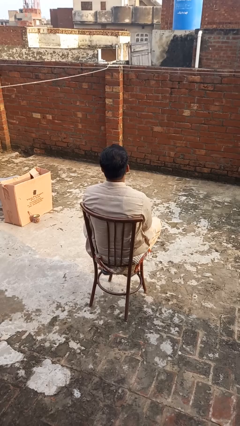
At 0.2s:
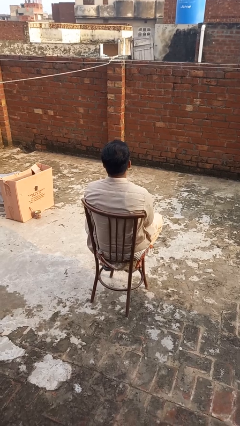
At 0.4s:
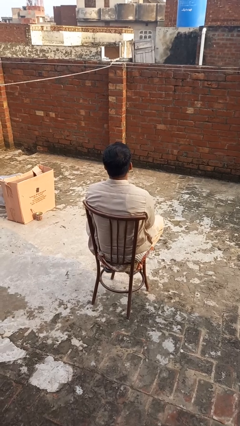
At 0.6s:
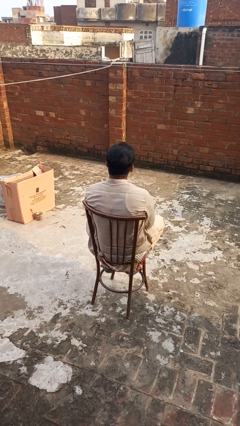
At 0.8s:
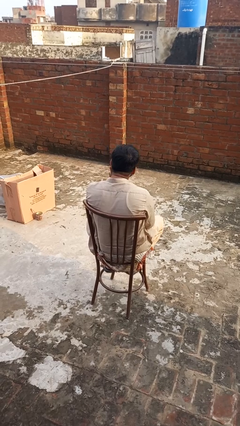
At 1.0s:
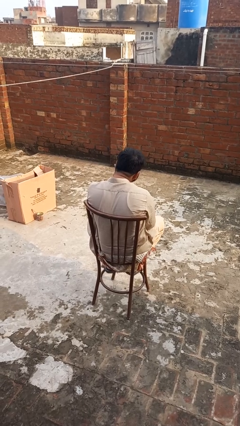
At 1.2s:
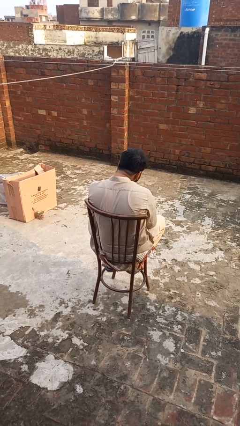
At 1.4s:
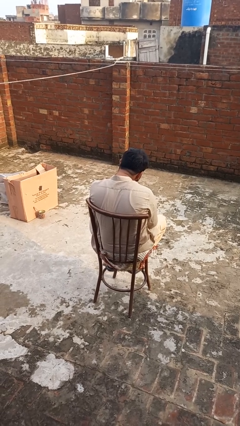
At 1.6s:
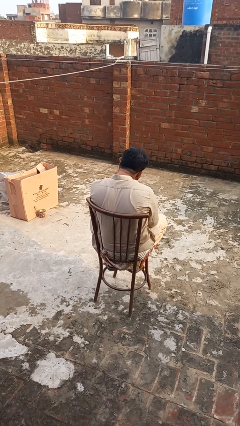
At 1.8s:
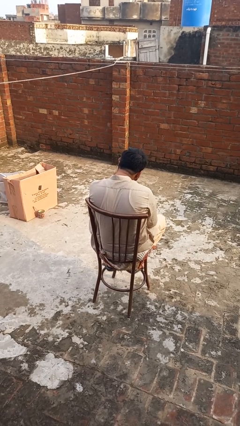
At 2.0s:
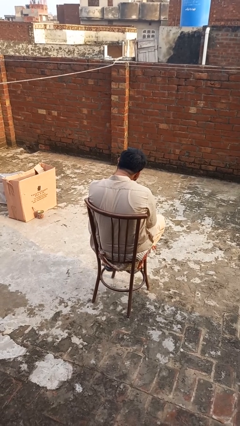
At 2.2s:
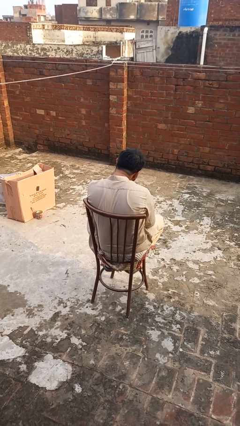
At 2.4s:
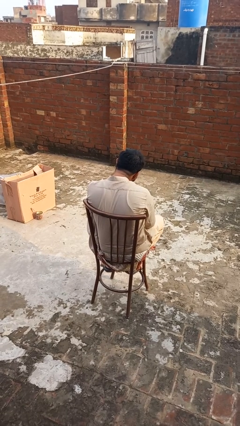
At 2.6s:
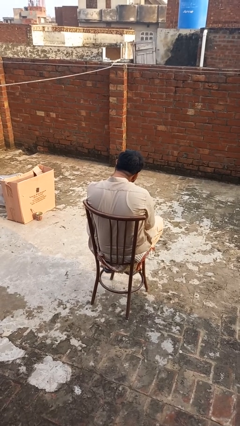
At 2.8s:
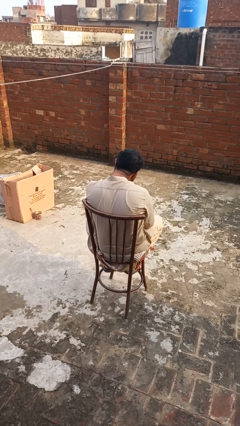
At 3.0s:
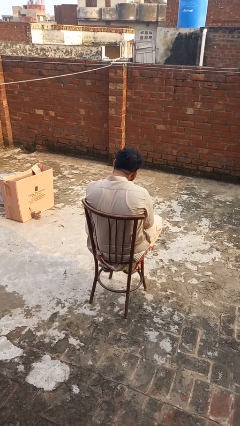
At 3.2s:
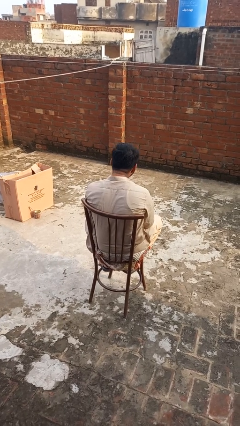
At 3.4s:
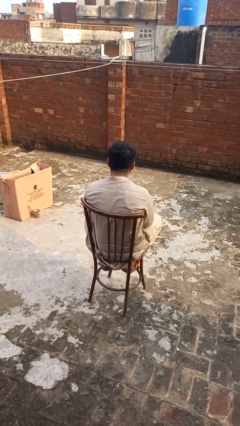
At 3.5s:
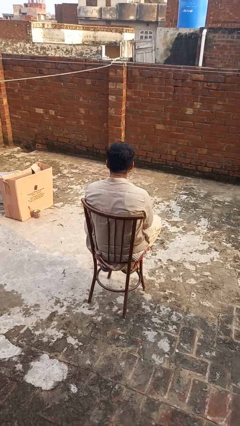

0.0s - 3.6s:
person gestures listen closely

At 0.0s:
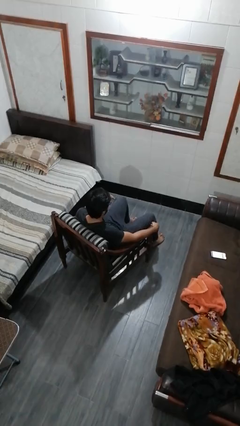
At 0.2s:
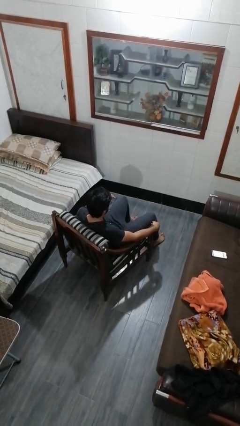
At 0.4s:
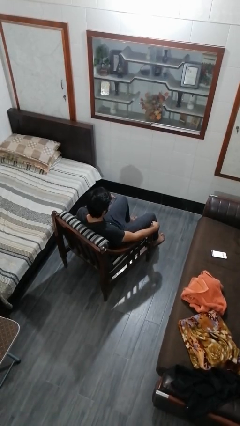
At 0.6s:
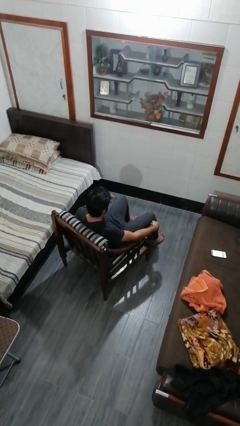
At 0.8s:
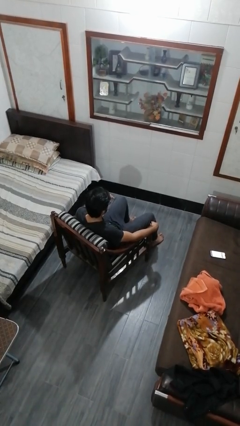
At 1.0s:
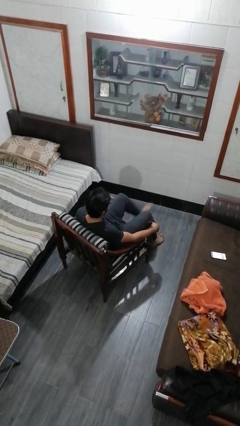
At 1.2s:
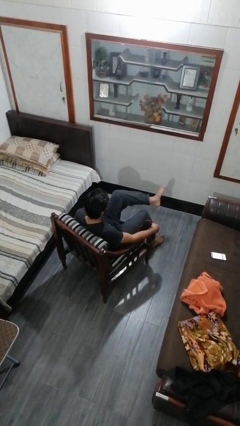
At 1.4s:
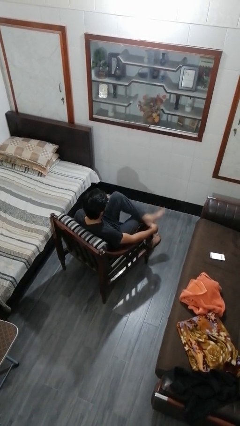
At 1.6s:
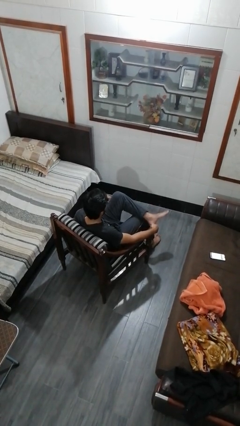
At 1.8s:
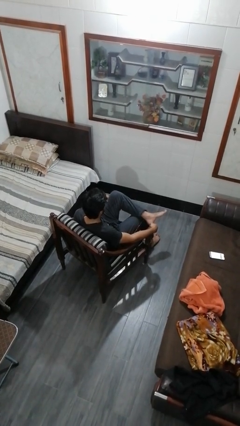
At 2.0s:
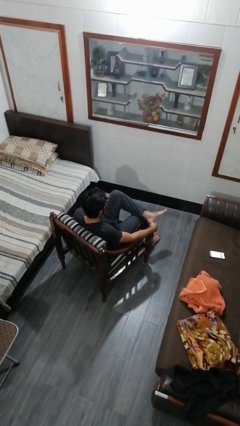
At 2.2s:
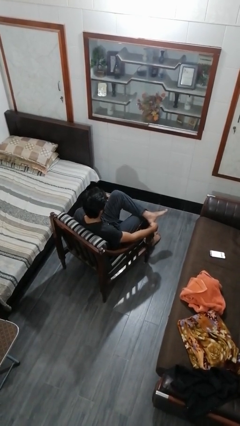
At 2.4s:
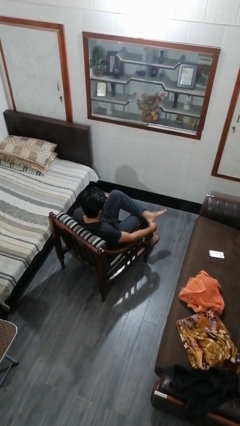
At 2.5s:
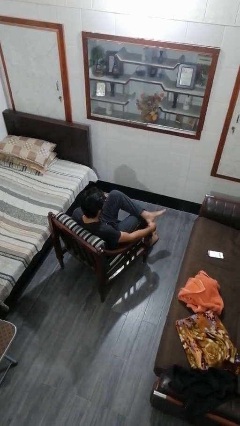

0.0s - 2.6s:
person crosses legs

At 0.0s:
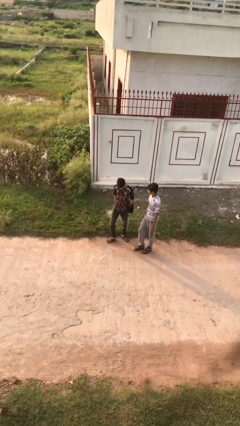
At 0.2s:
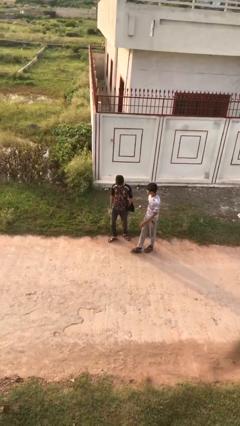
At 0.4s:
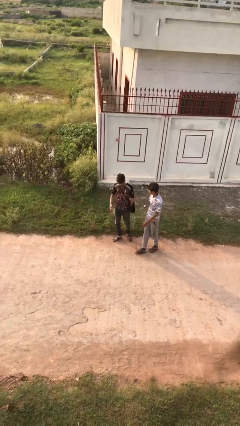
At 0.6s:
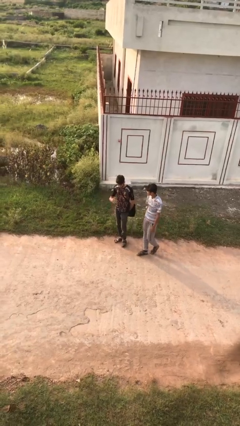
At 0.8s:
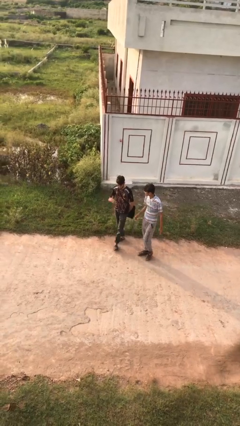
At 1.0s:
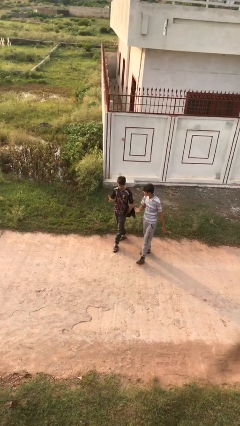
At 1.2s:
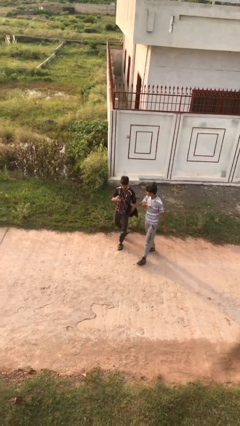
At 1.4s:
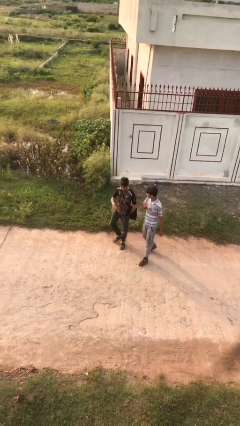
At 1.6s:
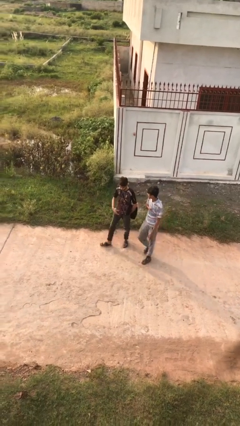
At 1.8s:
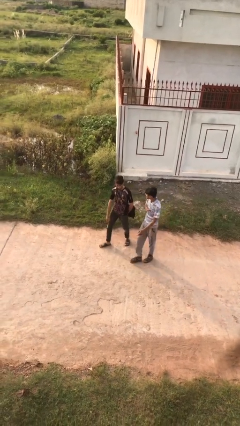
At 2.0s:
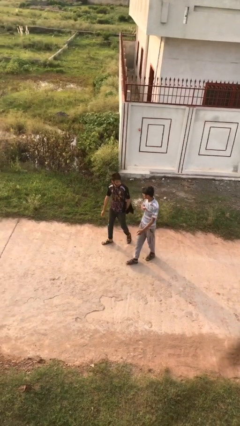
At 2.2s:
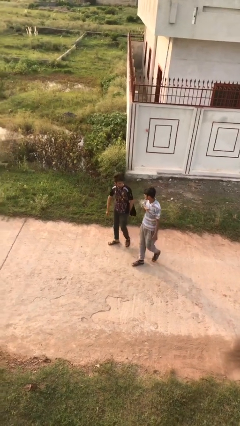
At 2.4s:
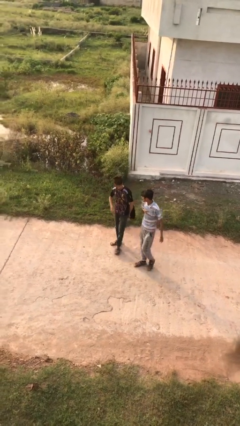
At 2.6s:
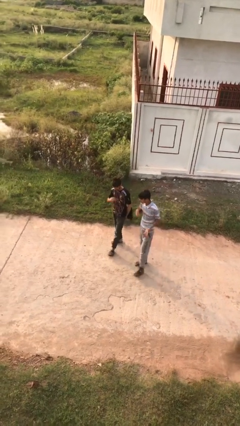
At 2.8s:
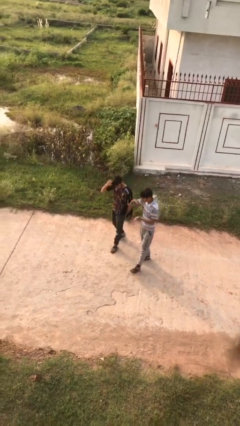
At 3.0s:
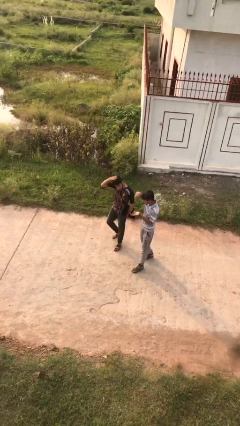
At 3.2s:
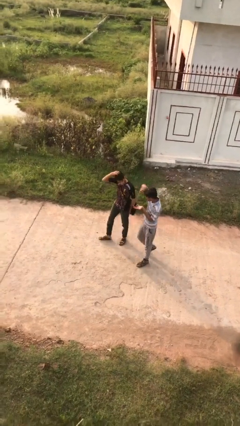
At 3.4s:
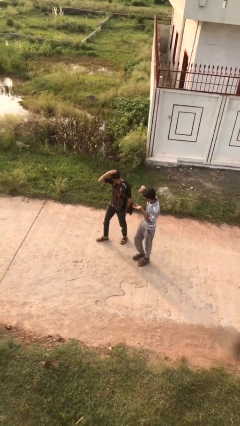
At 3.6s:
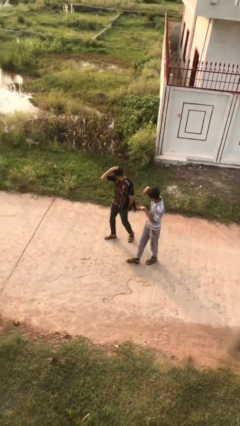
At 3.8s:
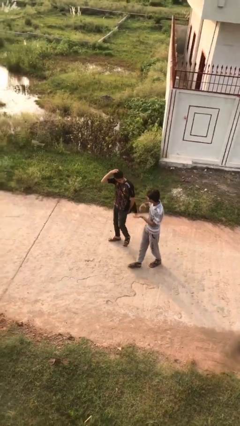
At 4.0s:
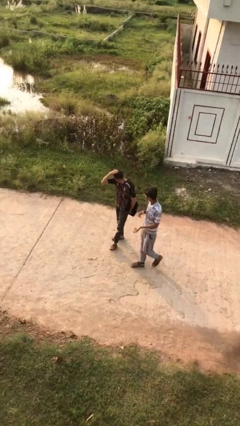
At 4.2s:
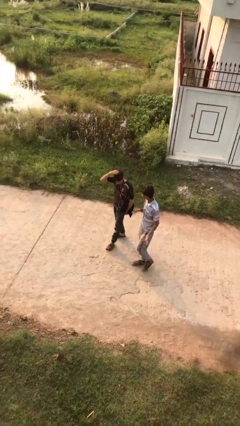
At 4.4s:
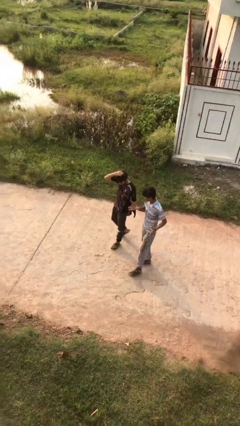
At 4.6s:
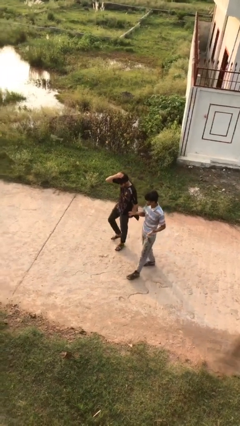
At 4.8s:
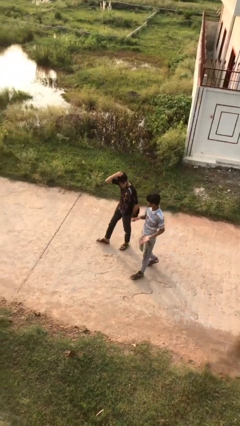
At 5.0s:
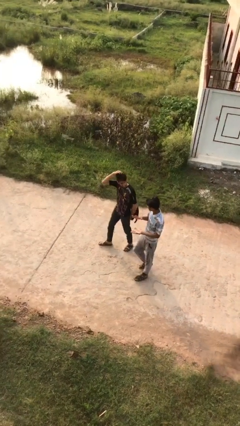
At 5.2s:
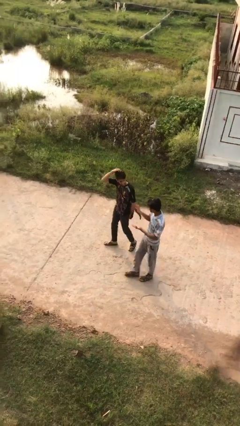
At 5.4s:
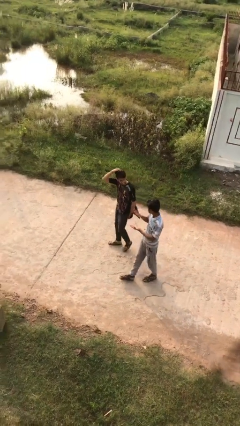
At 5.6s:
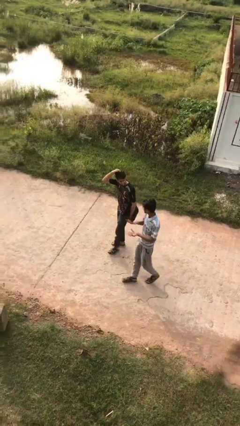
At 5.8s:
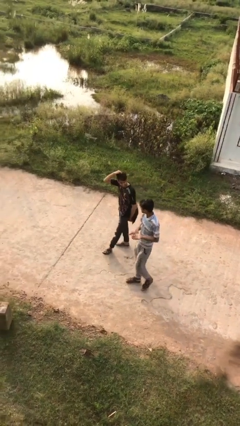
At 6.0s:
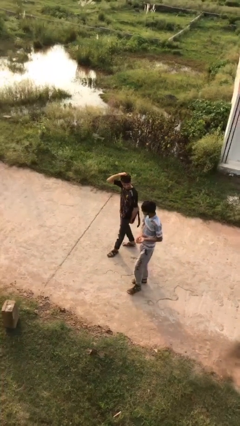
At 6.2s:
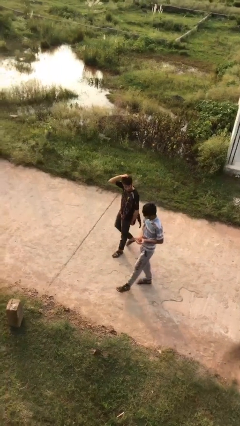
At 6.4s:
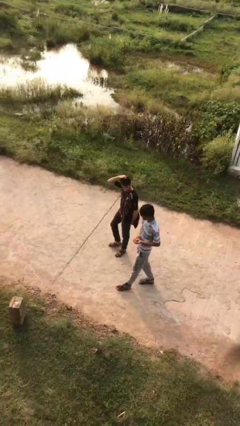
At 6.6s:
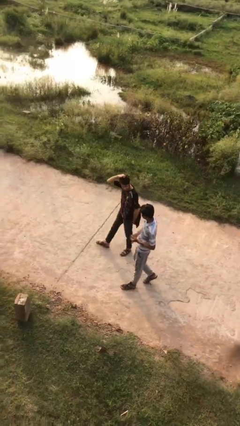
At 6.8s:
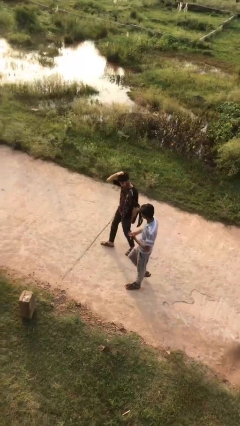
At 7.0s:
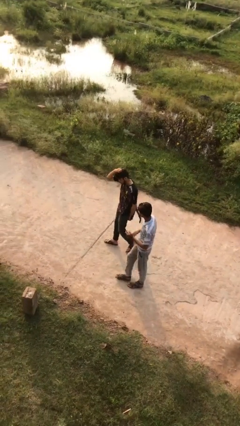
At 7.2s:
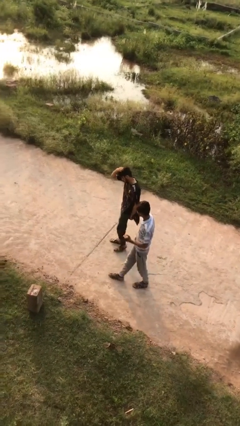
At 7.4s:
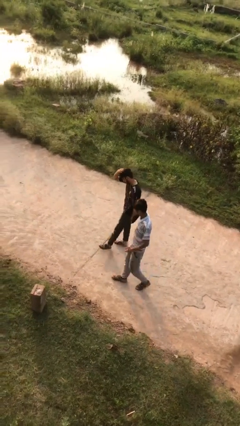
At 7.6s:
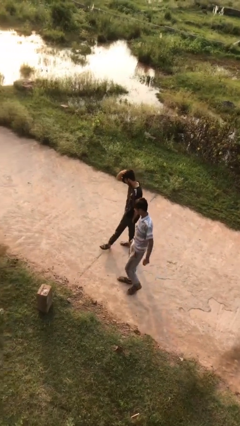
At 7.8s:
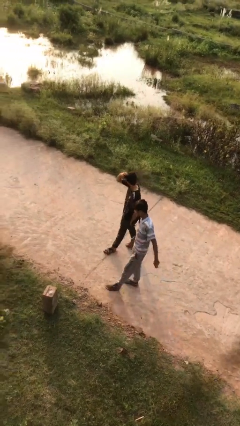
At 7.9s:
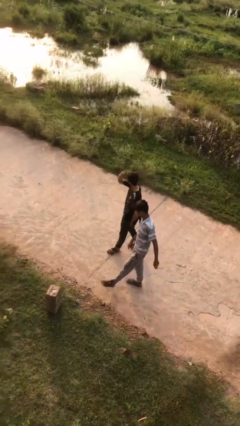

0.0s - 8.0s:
person talks to person

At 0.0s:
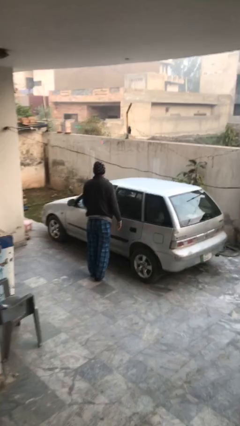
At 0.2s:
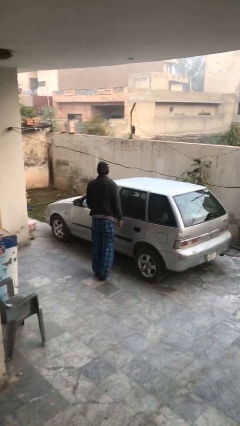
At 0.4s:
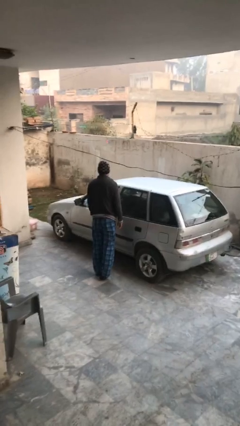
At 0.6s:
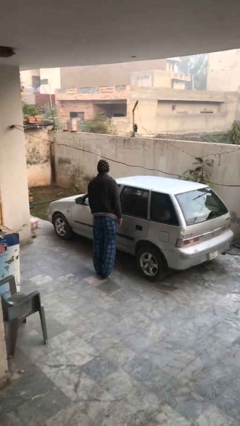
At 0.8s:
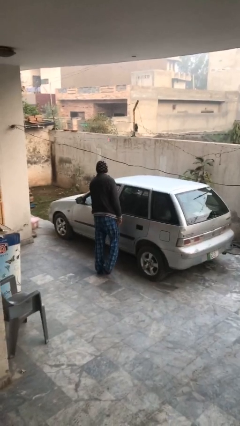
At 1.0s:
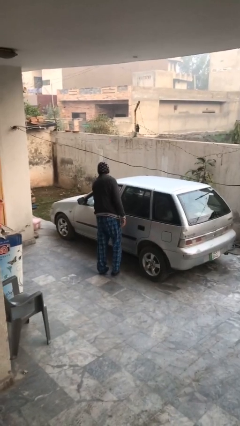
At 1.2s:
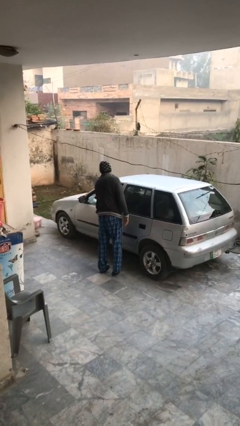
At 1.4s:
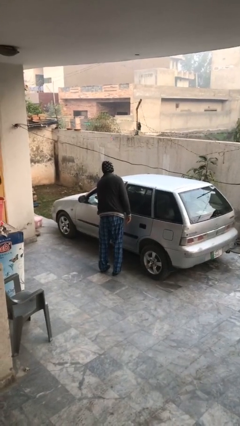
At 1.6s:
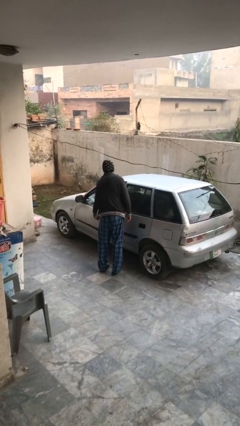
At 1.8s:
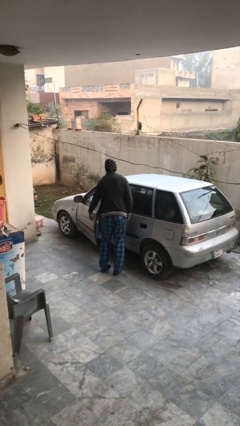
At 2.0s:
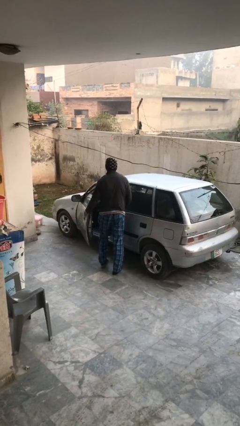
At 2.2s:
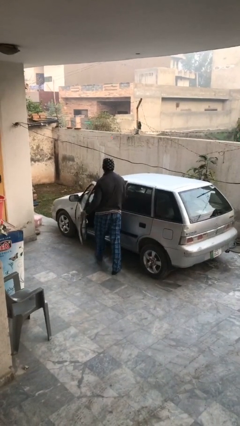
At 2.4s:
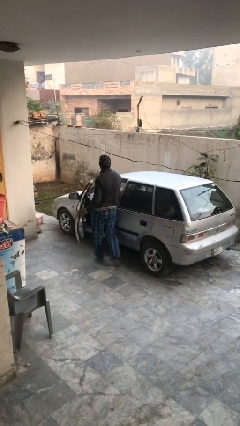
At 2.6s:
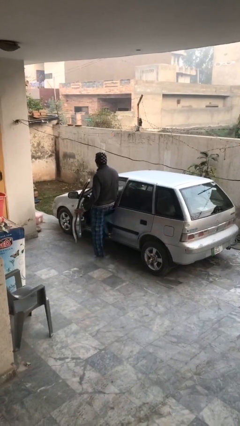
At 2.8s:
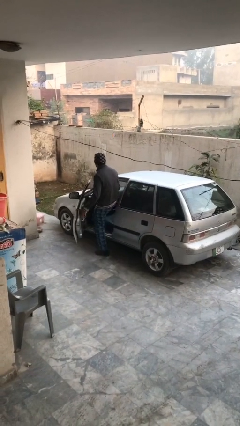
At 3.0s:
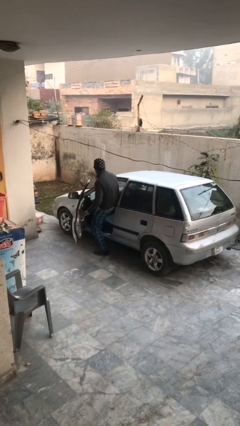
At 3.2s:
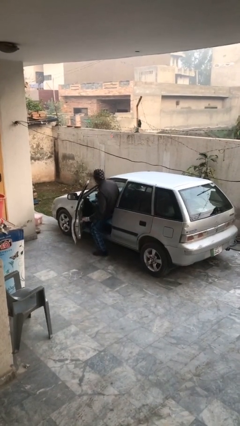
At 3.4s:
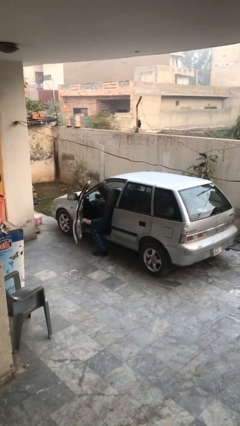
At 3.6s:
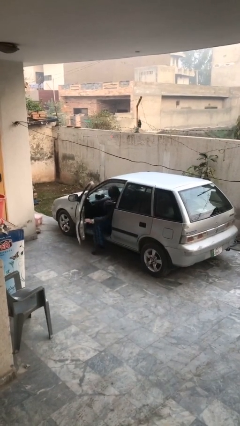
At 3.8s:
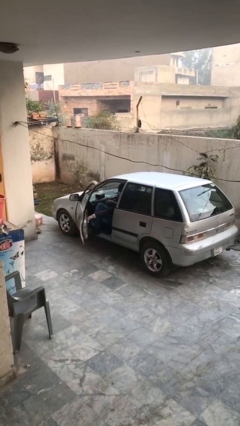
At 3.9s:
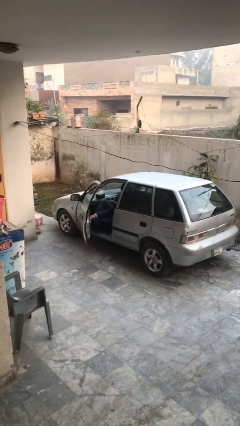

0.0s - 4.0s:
car picks up person
